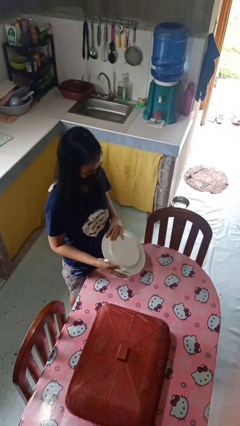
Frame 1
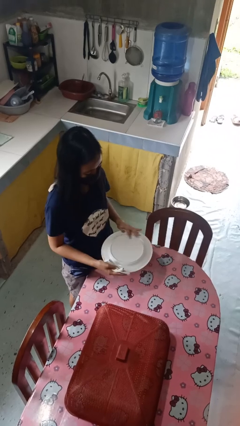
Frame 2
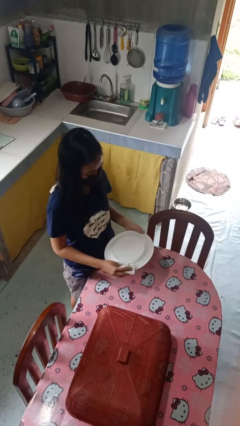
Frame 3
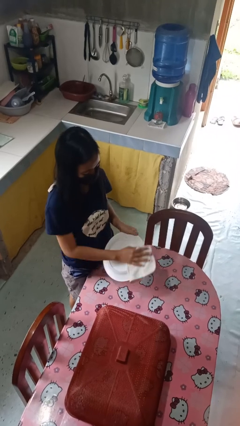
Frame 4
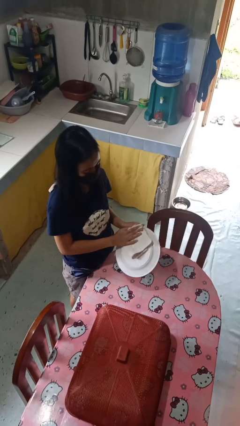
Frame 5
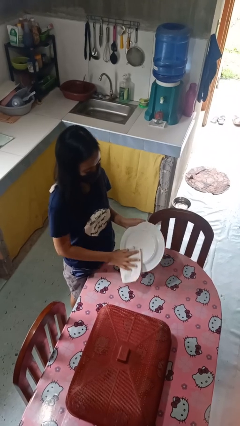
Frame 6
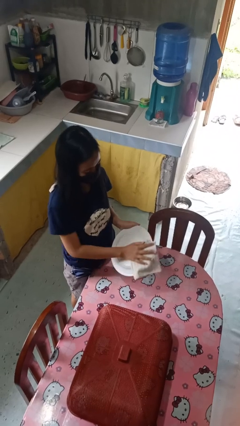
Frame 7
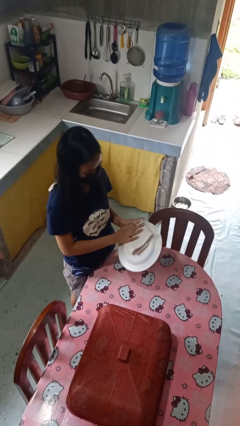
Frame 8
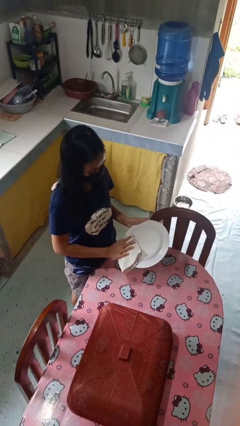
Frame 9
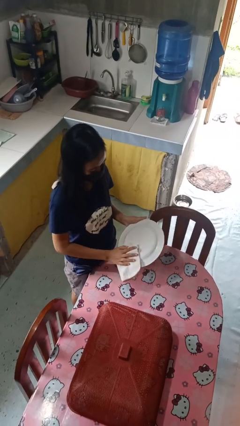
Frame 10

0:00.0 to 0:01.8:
person dries dish

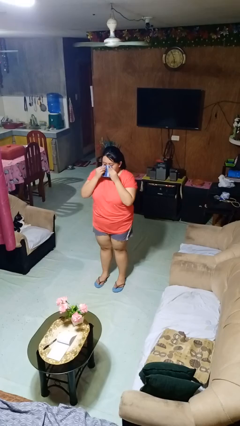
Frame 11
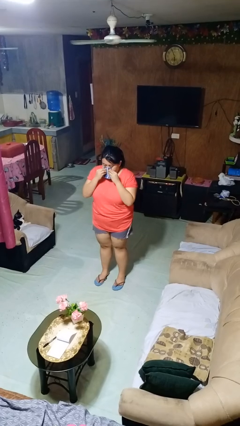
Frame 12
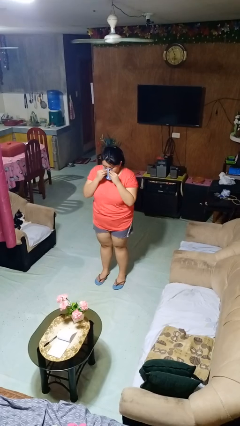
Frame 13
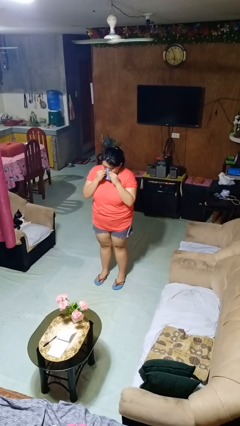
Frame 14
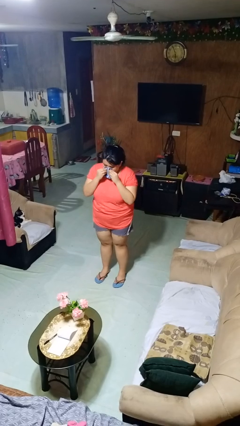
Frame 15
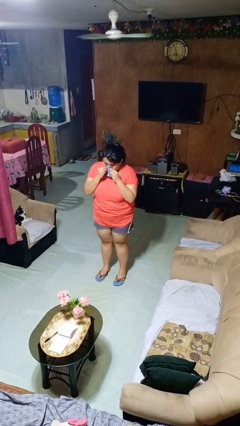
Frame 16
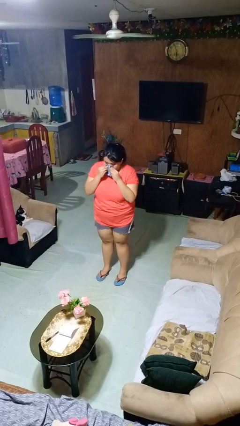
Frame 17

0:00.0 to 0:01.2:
person blows nose

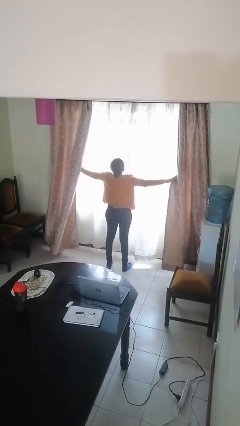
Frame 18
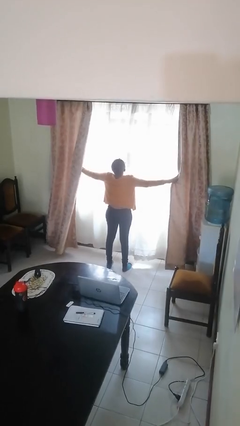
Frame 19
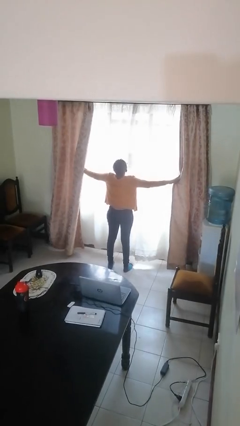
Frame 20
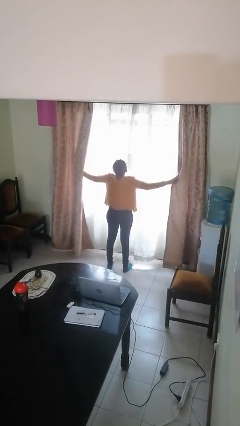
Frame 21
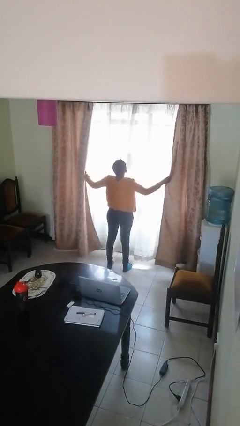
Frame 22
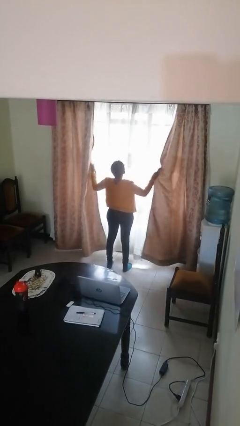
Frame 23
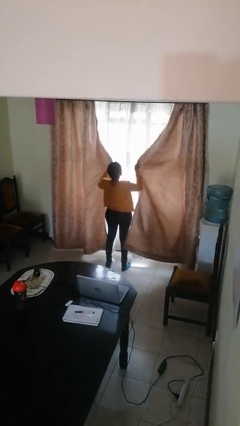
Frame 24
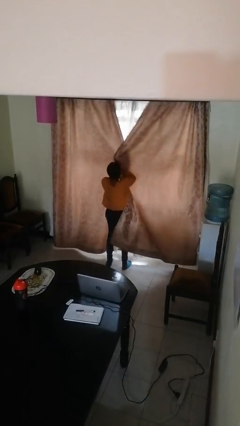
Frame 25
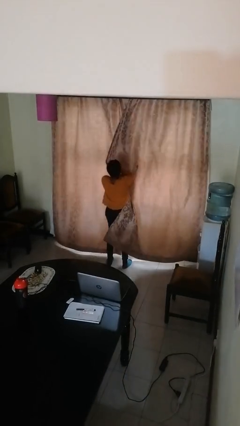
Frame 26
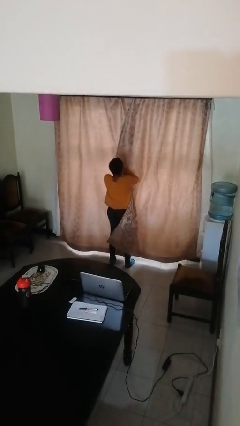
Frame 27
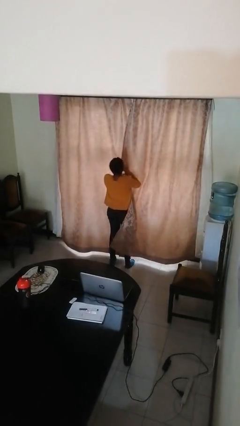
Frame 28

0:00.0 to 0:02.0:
person closes curtains

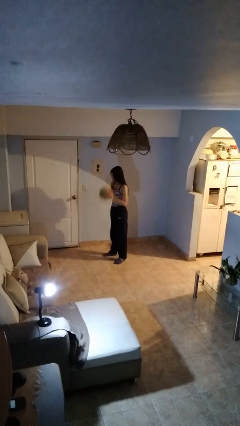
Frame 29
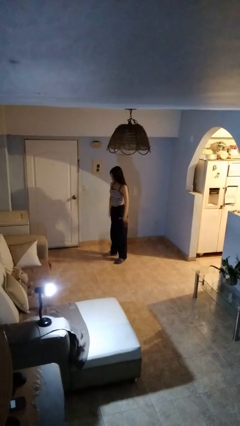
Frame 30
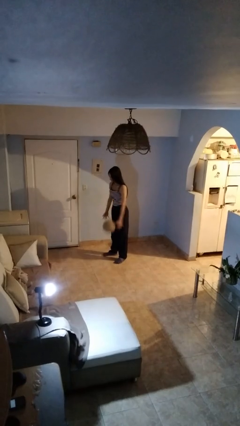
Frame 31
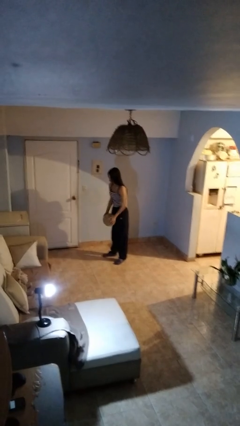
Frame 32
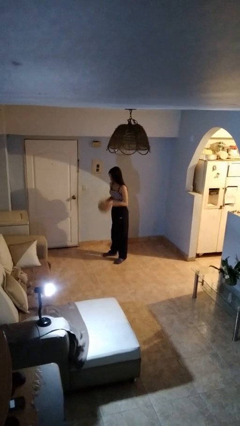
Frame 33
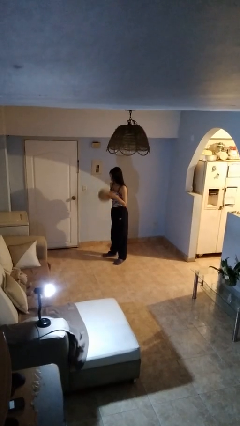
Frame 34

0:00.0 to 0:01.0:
person bounces ball on floor

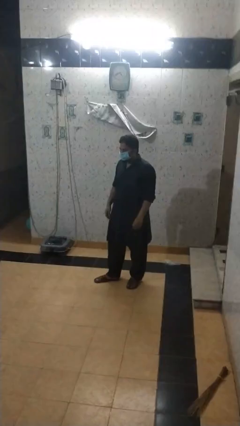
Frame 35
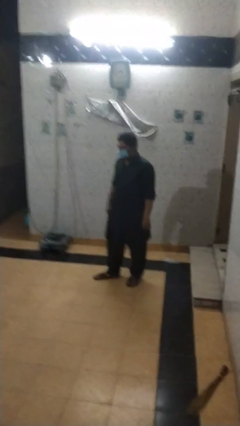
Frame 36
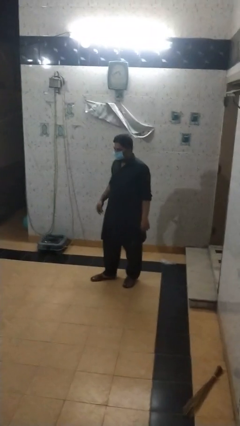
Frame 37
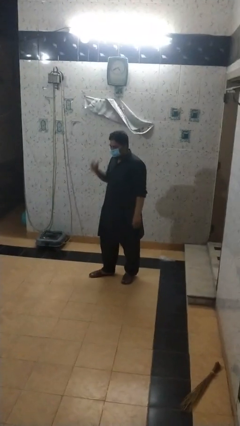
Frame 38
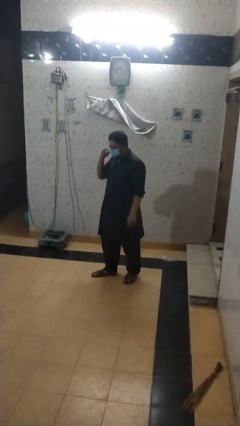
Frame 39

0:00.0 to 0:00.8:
person takes off facemask

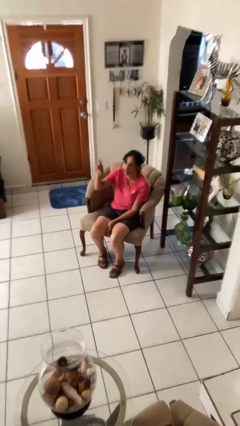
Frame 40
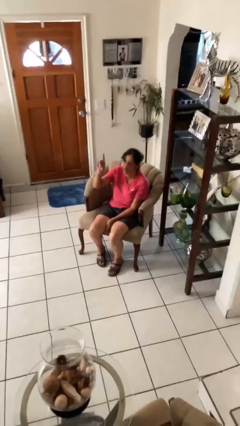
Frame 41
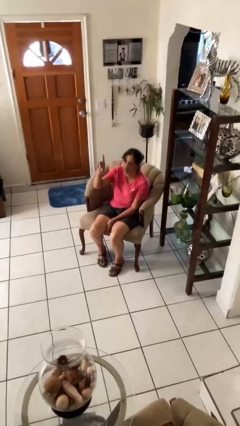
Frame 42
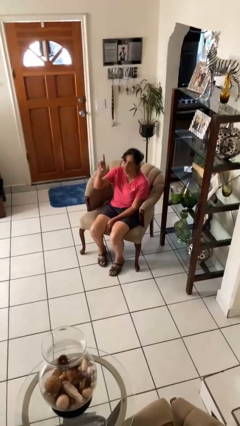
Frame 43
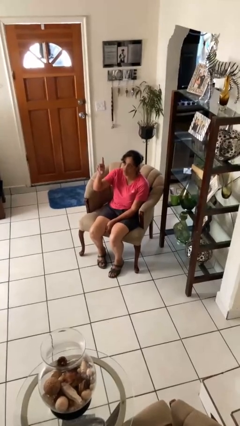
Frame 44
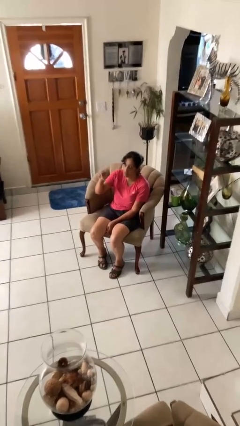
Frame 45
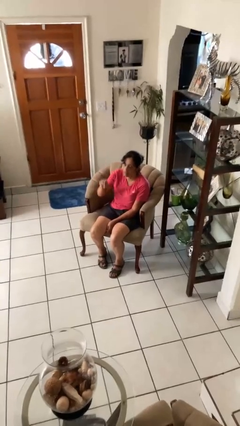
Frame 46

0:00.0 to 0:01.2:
person gestures number one

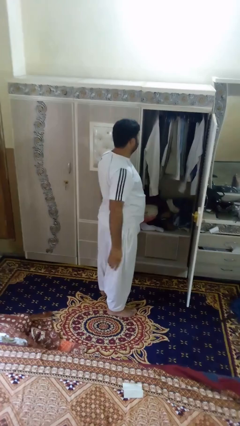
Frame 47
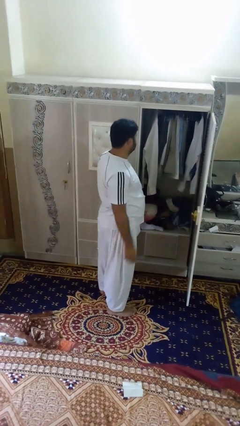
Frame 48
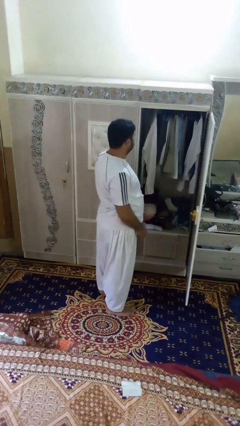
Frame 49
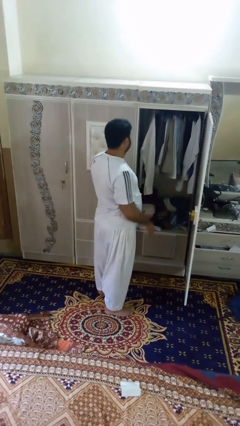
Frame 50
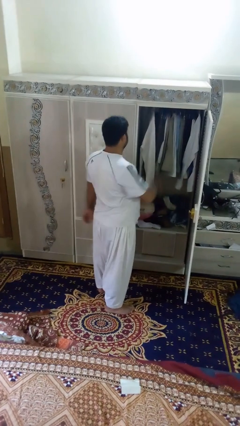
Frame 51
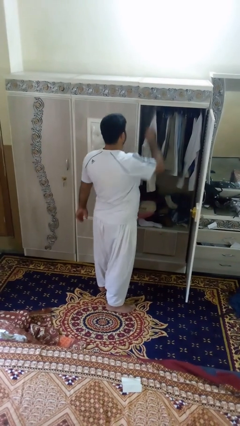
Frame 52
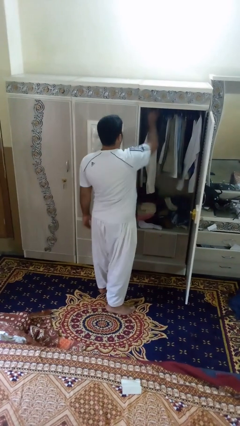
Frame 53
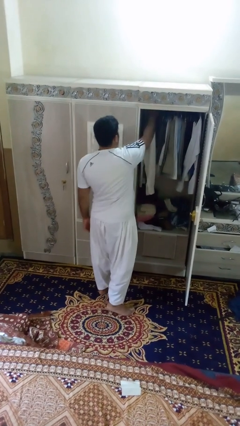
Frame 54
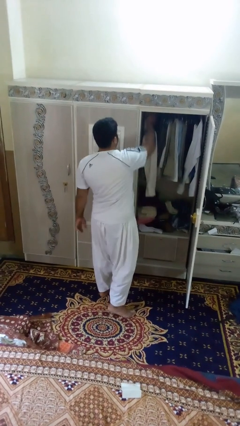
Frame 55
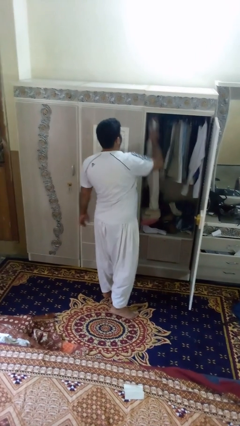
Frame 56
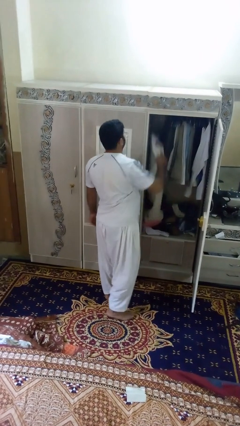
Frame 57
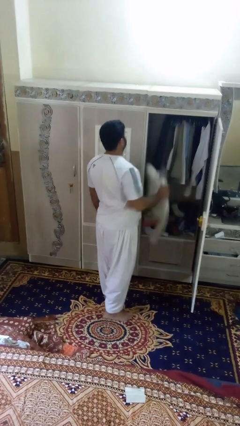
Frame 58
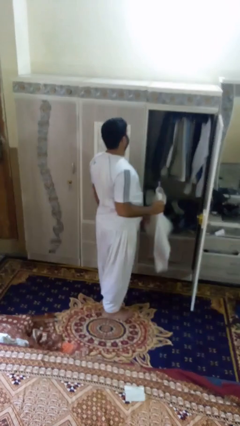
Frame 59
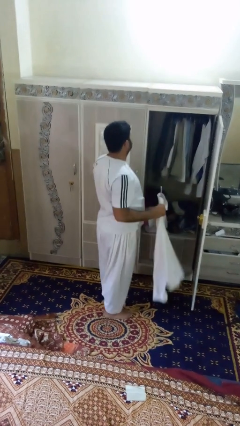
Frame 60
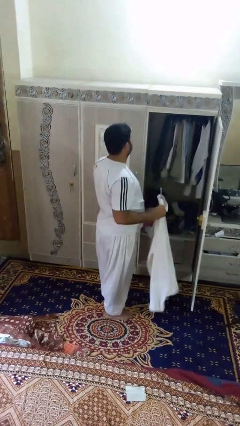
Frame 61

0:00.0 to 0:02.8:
person takes clothes from closet

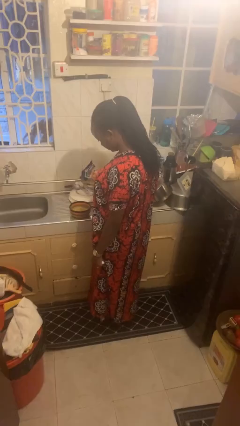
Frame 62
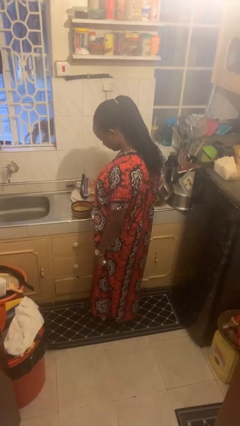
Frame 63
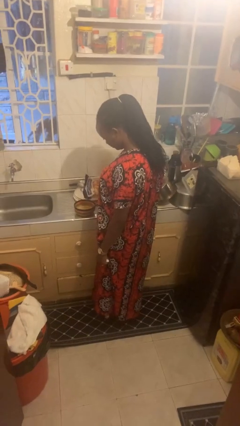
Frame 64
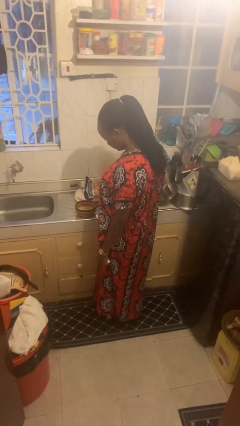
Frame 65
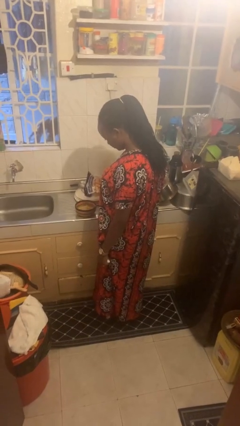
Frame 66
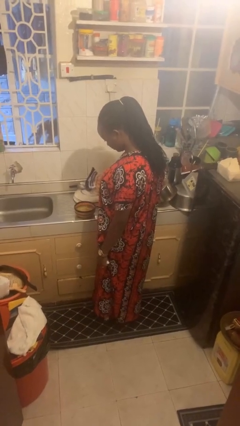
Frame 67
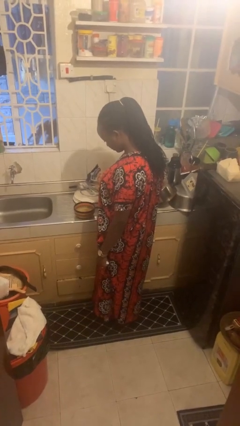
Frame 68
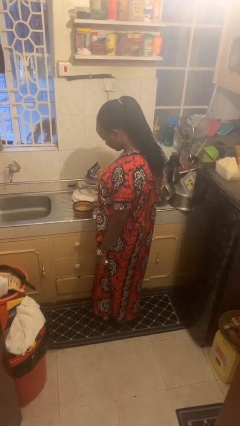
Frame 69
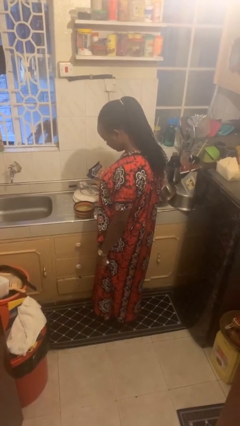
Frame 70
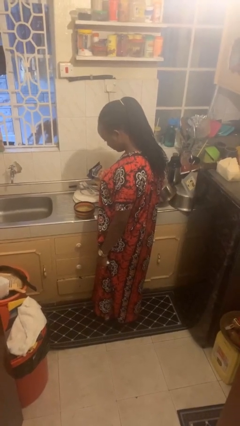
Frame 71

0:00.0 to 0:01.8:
person pours into bowl

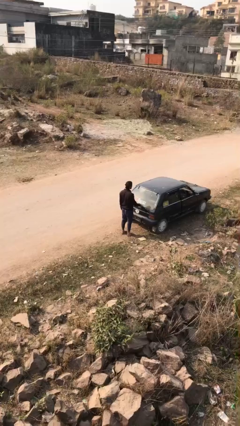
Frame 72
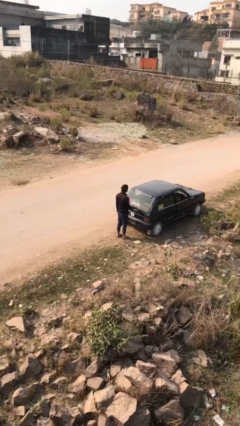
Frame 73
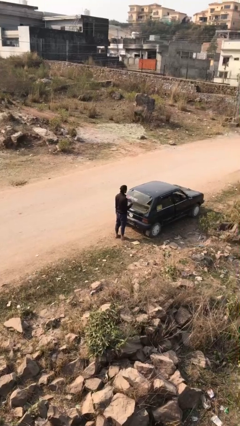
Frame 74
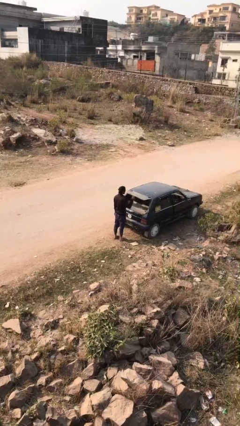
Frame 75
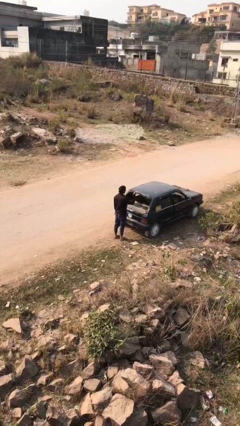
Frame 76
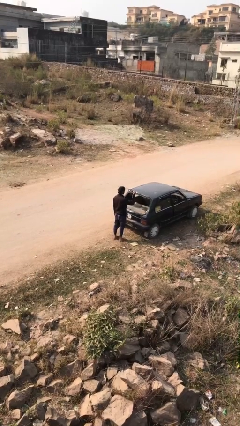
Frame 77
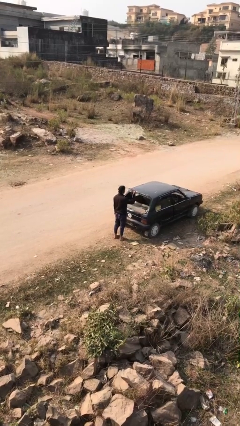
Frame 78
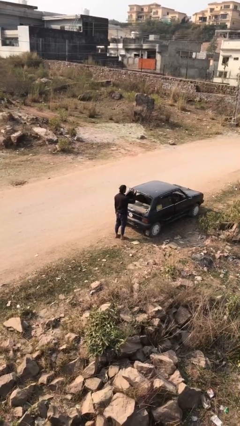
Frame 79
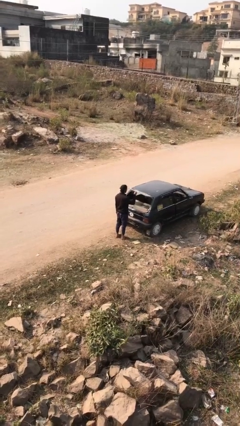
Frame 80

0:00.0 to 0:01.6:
person opens car trunk

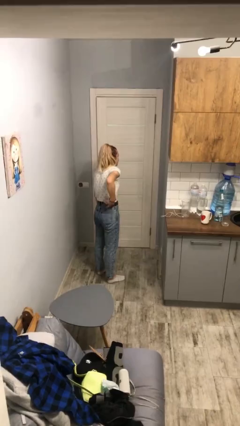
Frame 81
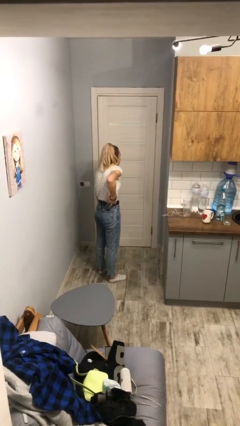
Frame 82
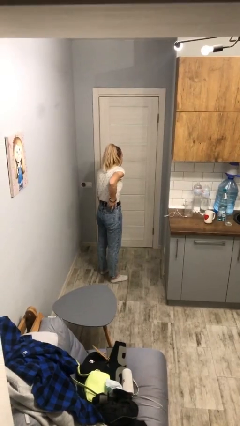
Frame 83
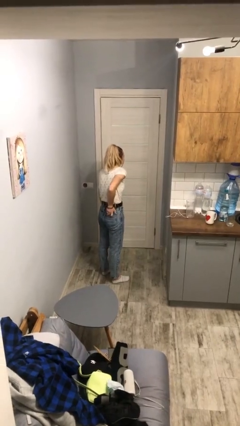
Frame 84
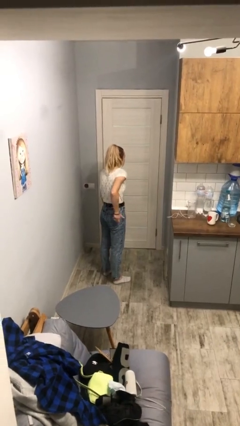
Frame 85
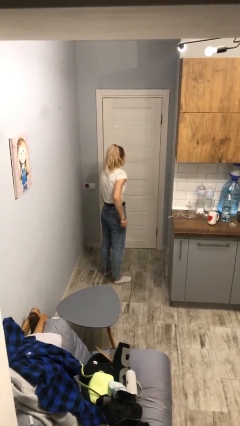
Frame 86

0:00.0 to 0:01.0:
person puts phone into pocket

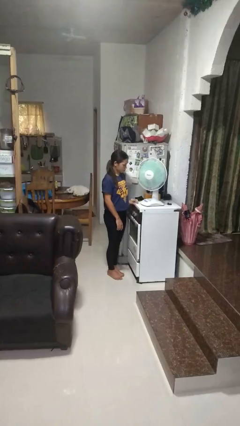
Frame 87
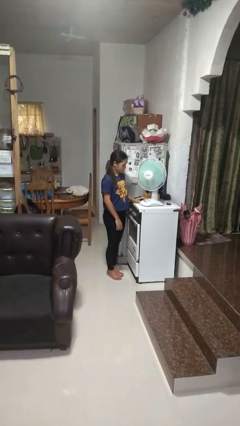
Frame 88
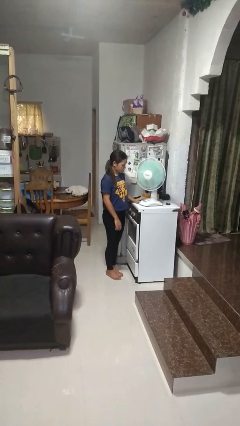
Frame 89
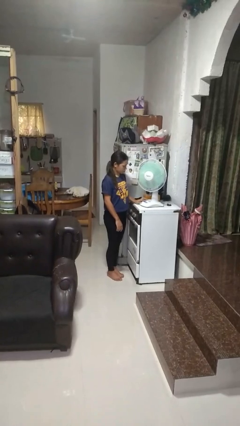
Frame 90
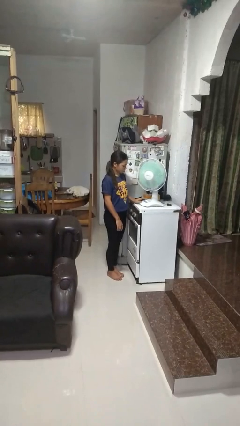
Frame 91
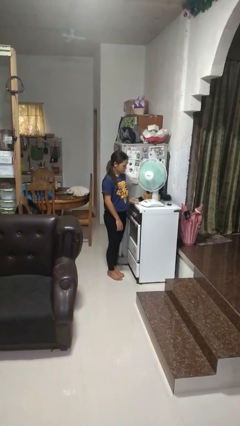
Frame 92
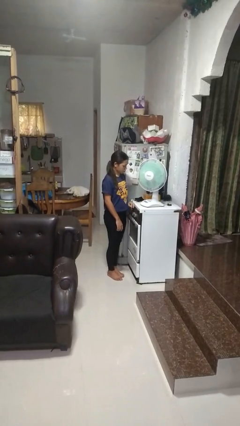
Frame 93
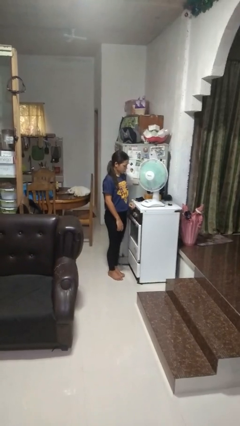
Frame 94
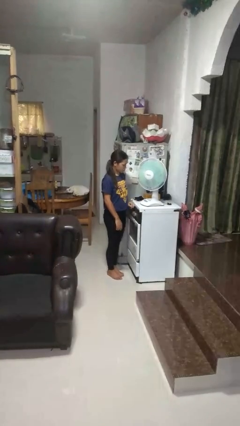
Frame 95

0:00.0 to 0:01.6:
person turns off fan
